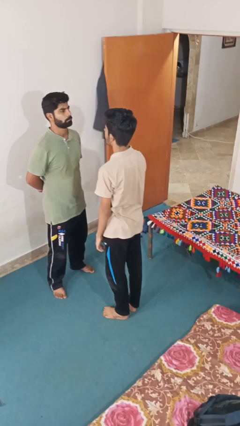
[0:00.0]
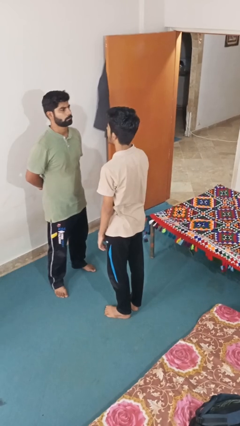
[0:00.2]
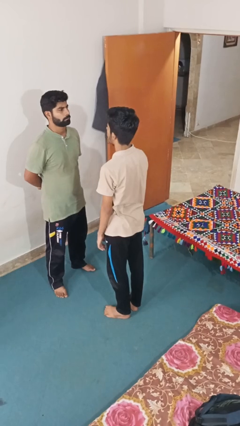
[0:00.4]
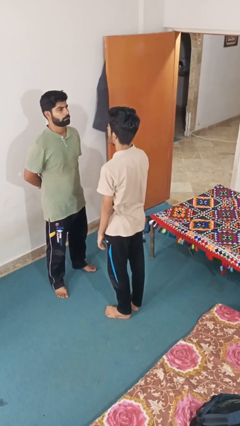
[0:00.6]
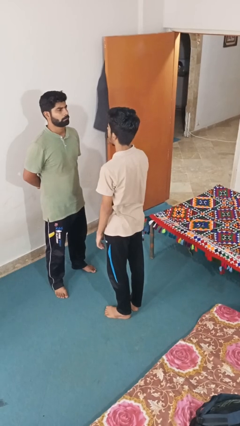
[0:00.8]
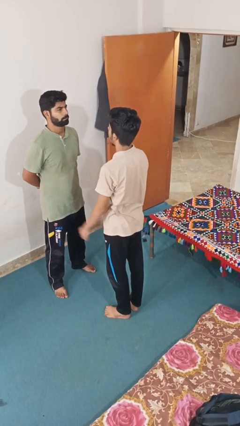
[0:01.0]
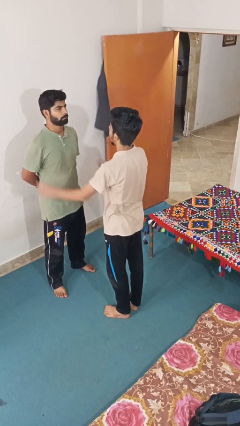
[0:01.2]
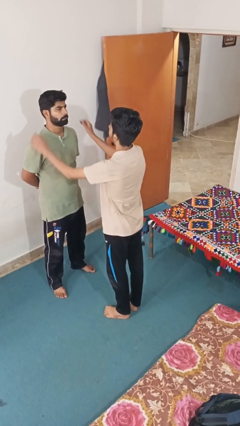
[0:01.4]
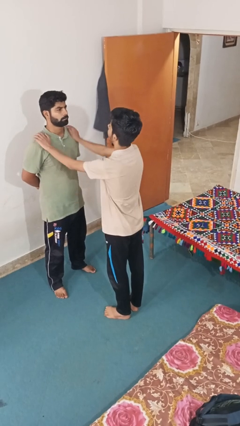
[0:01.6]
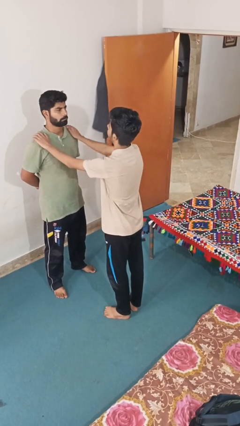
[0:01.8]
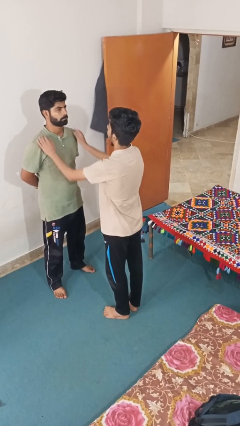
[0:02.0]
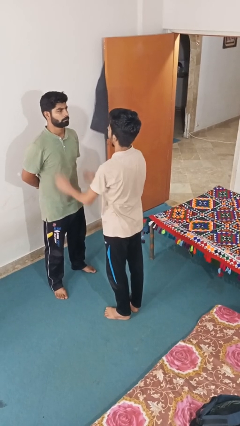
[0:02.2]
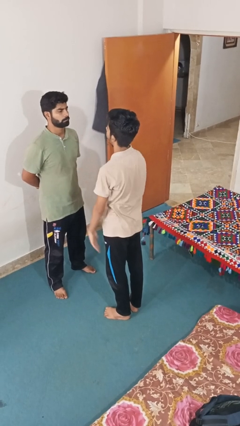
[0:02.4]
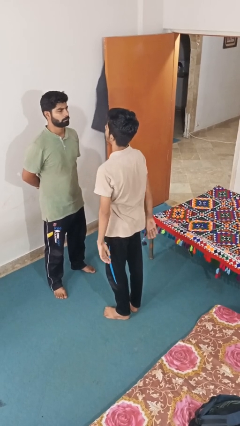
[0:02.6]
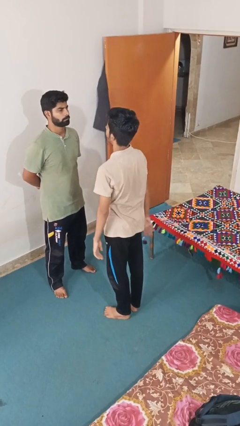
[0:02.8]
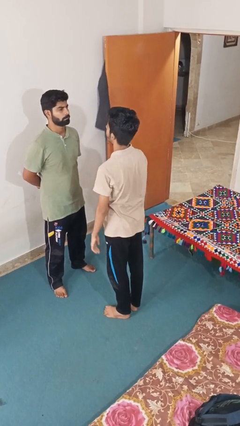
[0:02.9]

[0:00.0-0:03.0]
person pounds shoulders of person

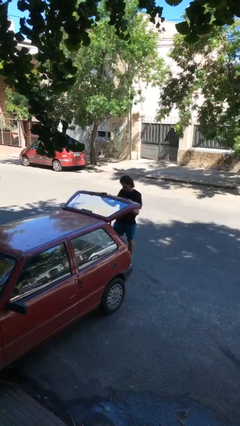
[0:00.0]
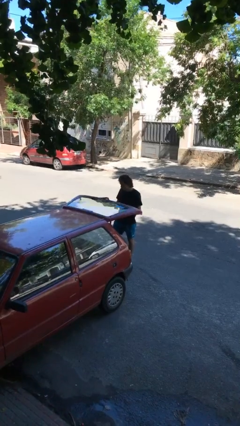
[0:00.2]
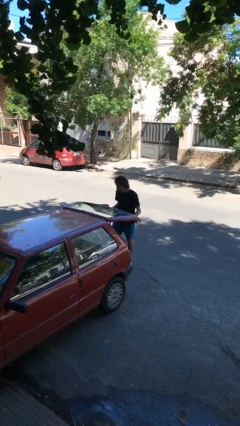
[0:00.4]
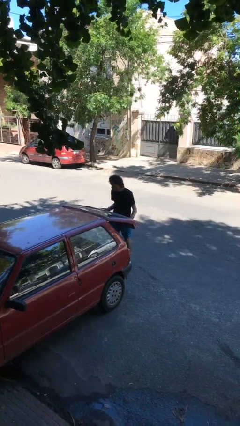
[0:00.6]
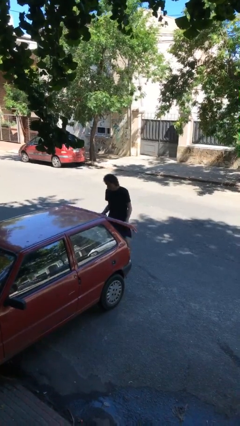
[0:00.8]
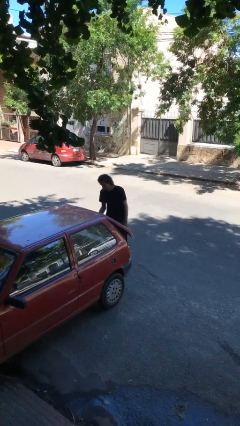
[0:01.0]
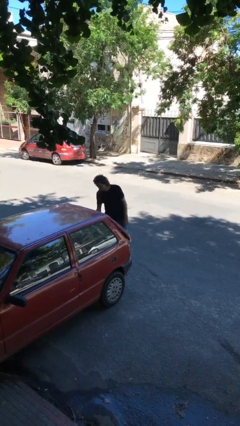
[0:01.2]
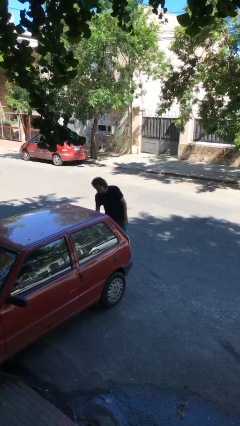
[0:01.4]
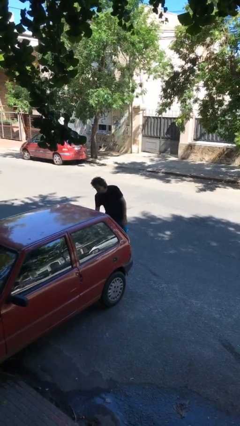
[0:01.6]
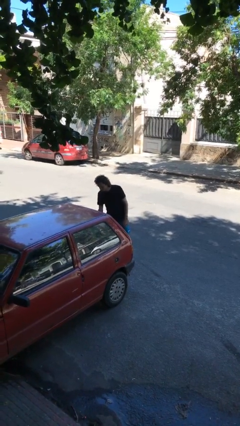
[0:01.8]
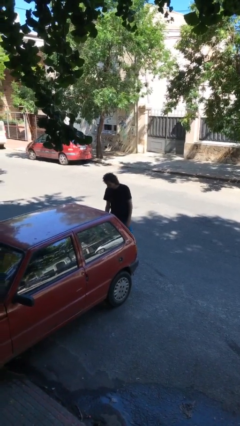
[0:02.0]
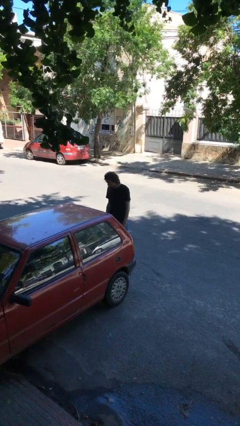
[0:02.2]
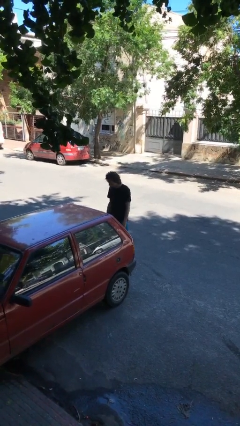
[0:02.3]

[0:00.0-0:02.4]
person closes car trunk

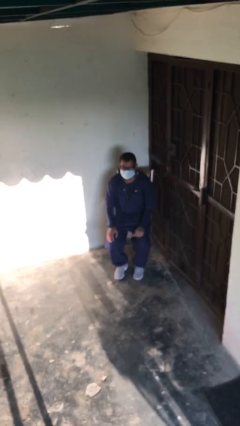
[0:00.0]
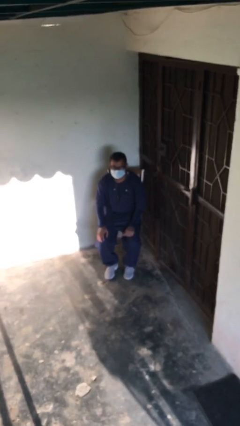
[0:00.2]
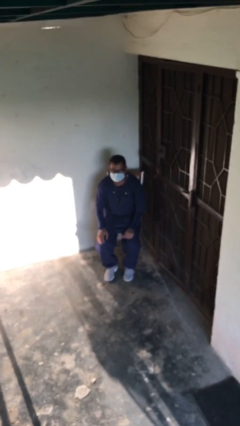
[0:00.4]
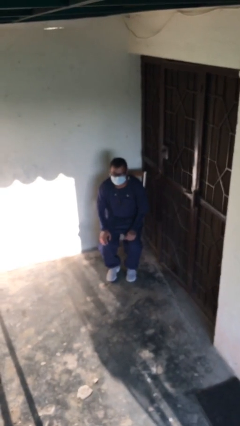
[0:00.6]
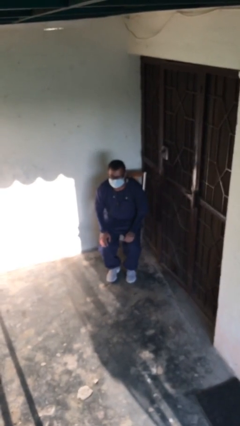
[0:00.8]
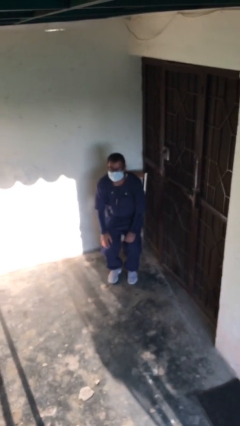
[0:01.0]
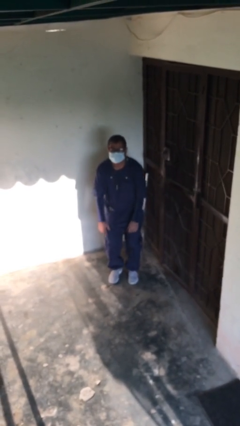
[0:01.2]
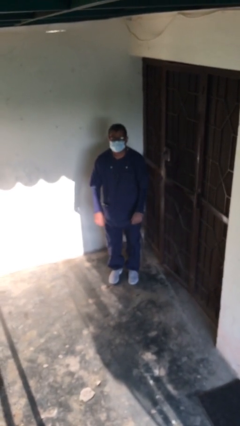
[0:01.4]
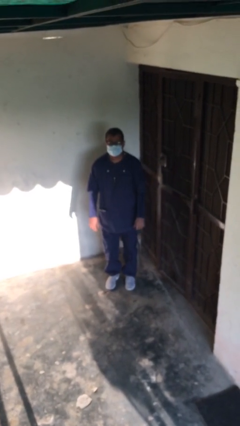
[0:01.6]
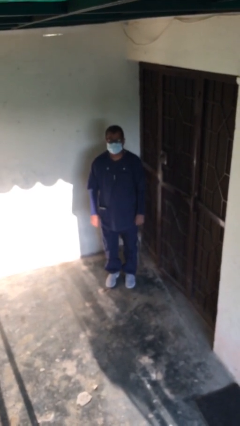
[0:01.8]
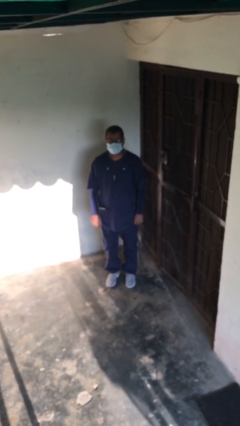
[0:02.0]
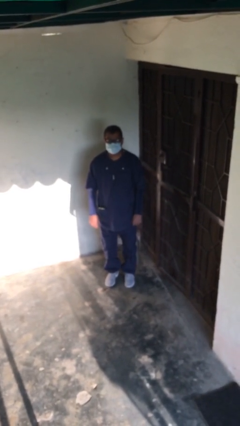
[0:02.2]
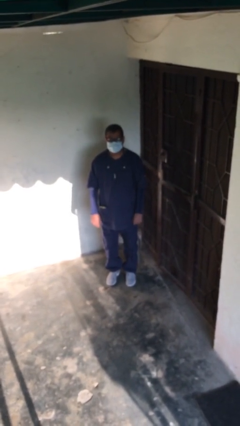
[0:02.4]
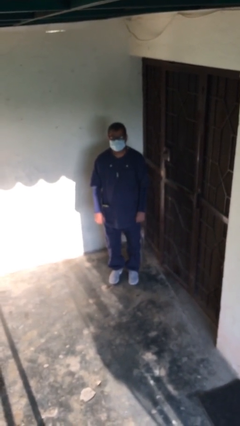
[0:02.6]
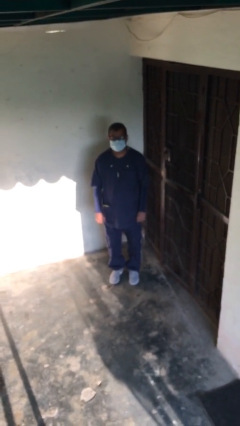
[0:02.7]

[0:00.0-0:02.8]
person stands up

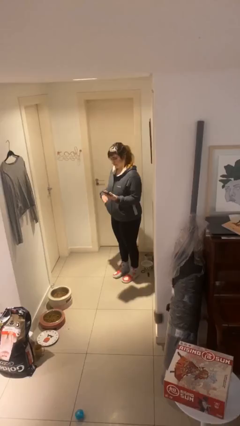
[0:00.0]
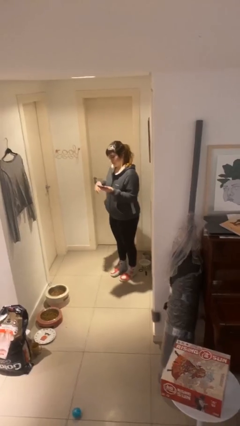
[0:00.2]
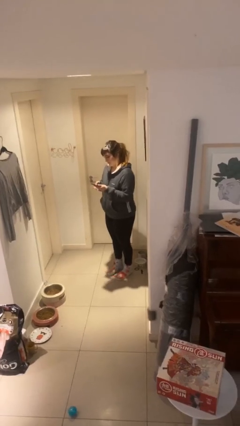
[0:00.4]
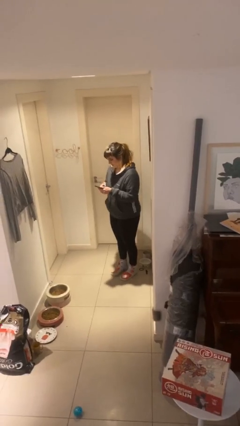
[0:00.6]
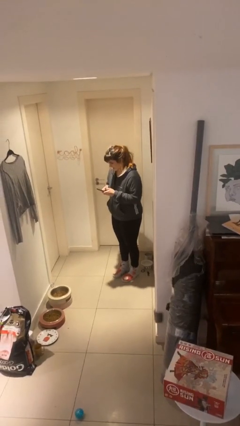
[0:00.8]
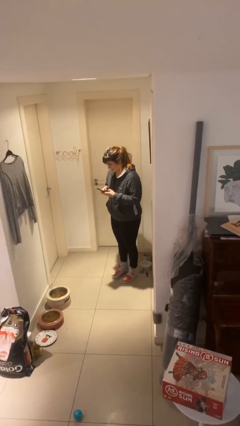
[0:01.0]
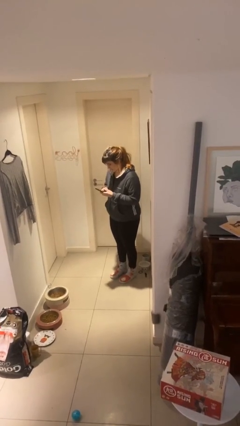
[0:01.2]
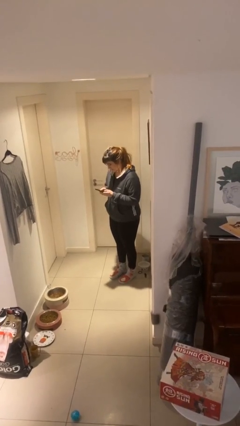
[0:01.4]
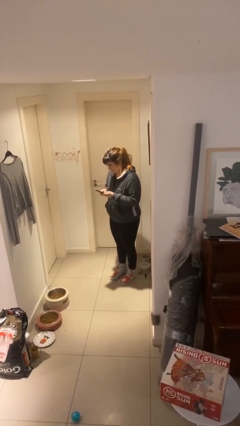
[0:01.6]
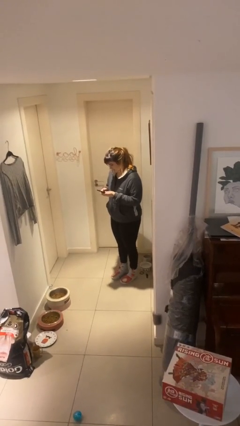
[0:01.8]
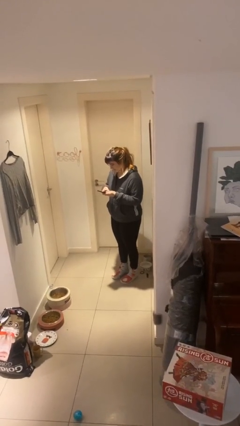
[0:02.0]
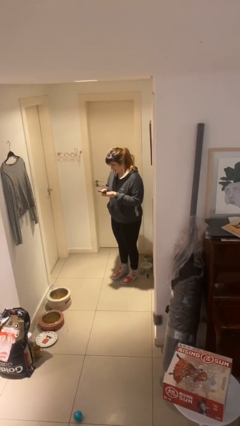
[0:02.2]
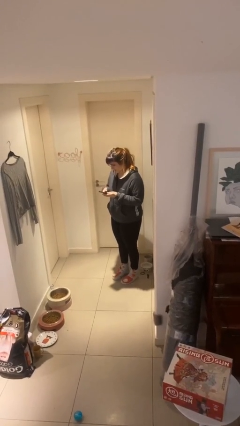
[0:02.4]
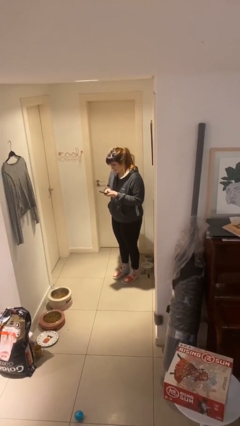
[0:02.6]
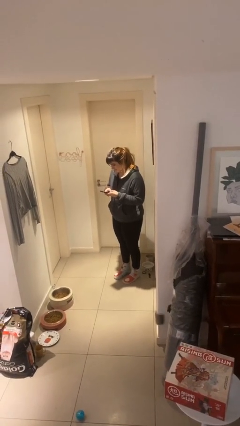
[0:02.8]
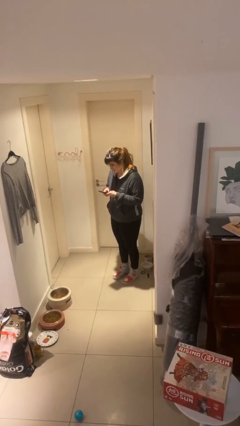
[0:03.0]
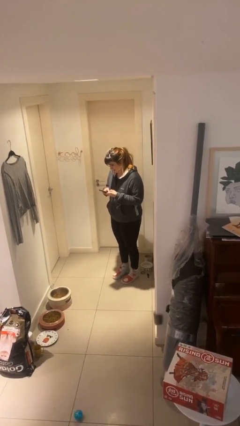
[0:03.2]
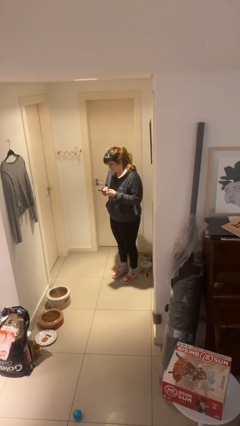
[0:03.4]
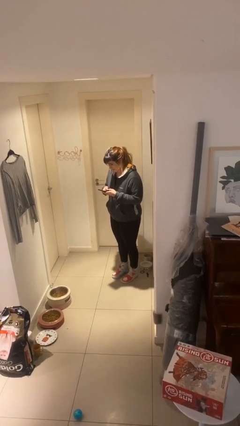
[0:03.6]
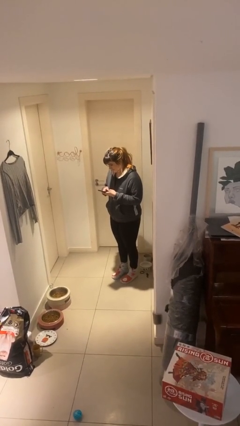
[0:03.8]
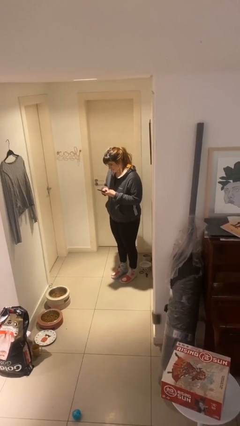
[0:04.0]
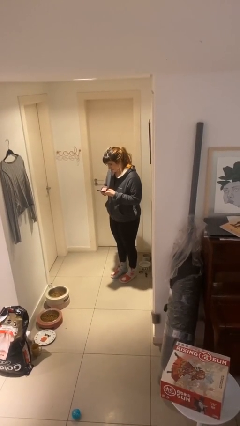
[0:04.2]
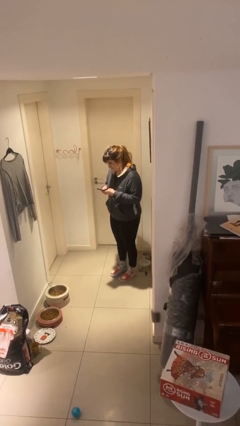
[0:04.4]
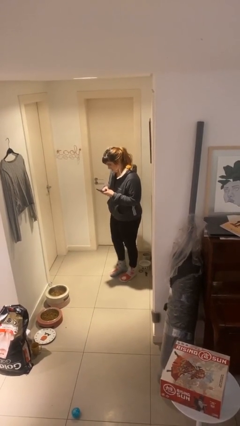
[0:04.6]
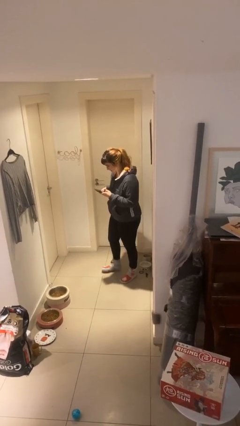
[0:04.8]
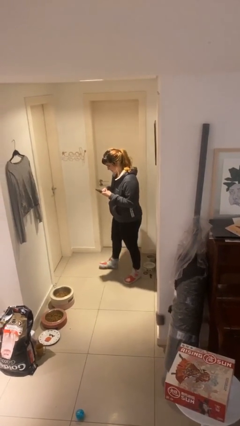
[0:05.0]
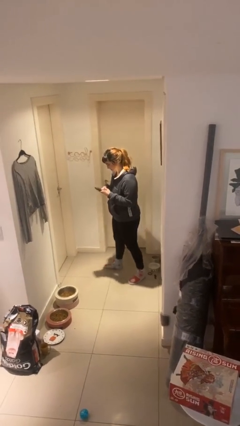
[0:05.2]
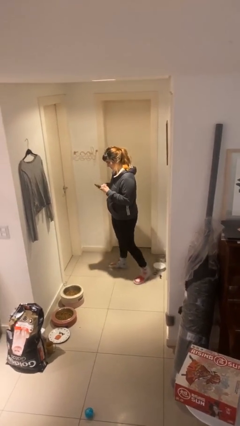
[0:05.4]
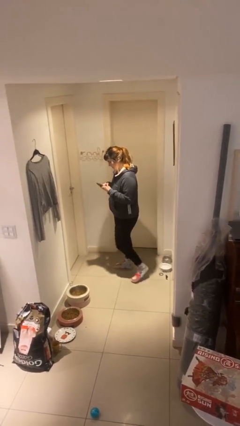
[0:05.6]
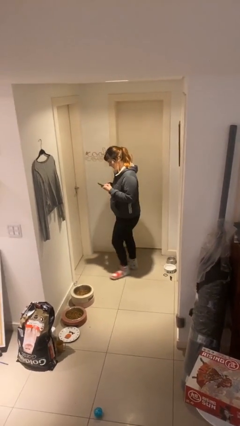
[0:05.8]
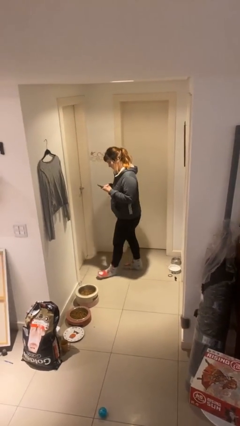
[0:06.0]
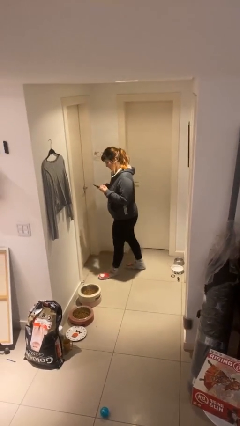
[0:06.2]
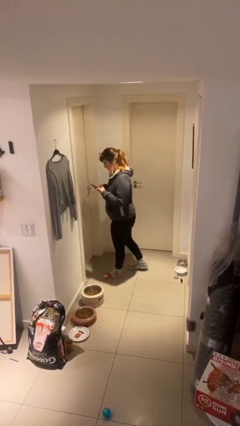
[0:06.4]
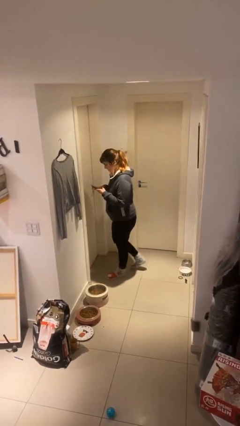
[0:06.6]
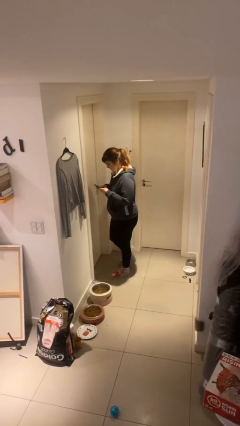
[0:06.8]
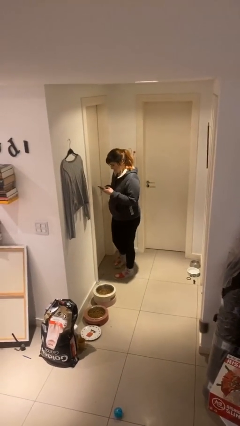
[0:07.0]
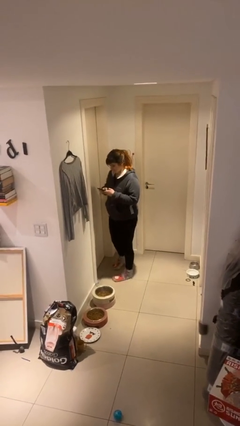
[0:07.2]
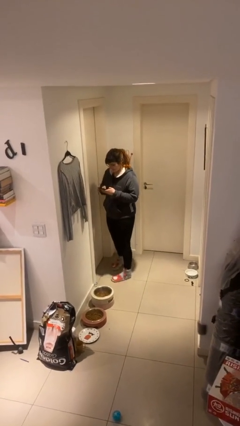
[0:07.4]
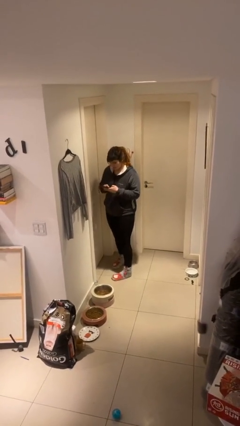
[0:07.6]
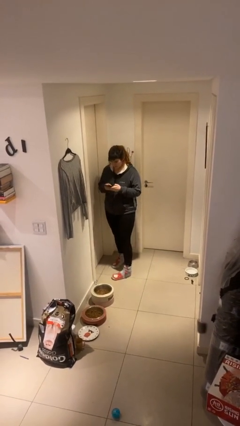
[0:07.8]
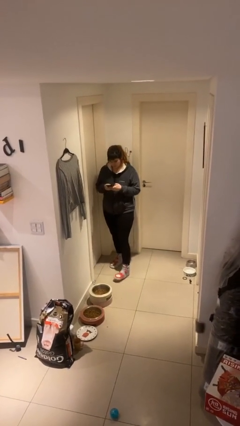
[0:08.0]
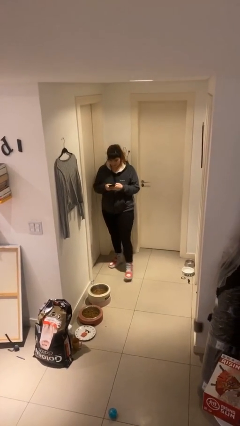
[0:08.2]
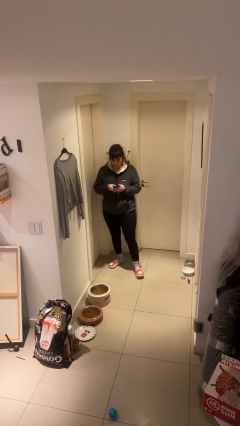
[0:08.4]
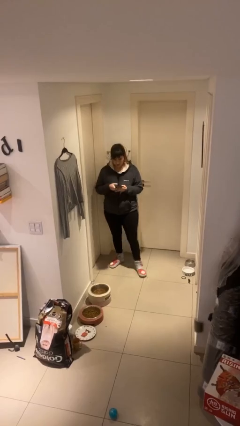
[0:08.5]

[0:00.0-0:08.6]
person texts on phone

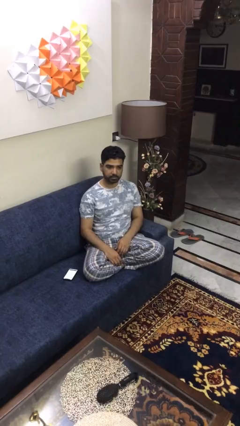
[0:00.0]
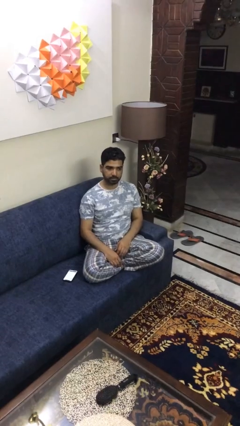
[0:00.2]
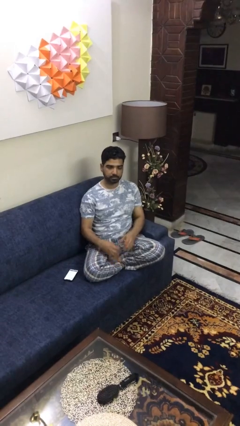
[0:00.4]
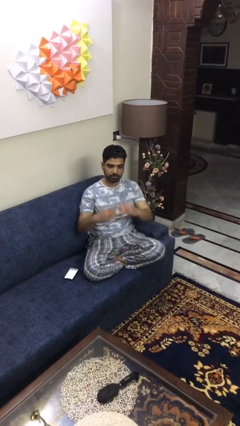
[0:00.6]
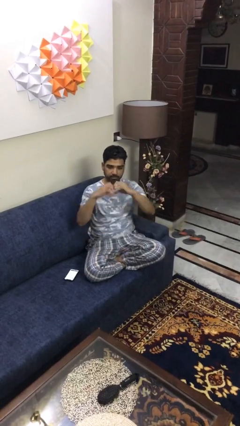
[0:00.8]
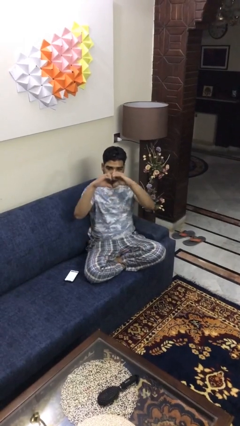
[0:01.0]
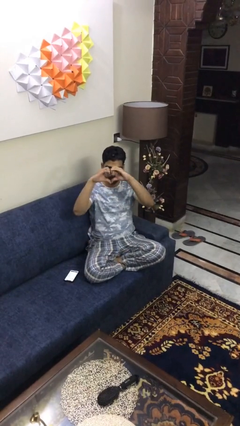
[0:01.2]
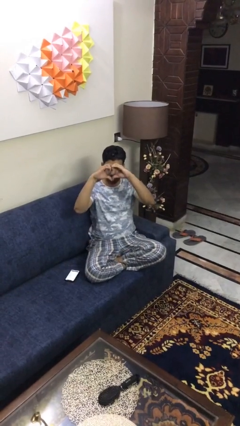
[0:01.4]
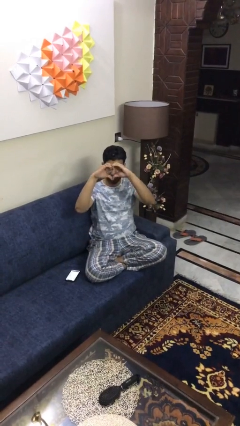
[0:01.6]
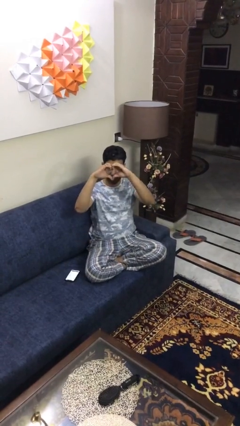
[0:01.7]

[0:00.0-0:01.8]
person gestures heart
